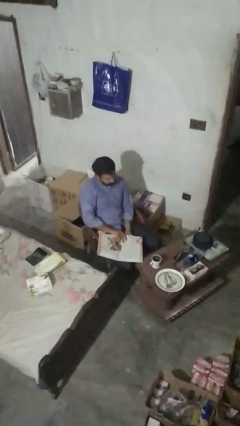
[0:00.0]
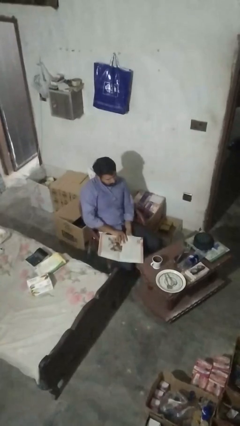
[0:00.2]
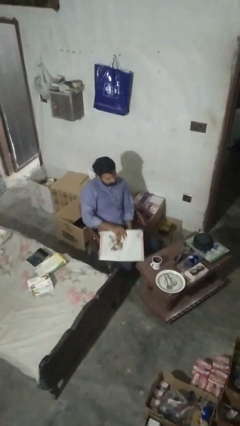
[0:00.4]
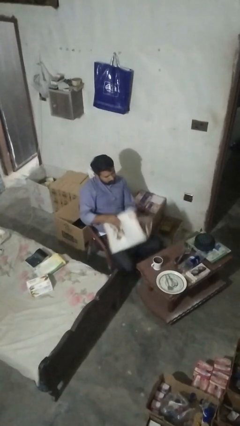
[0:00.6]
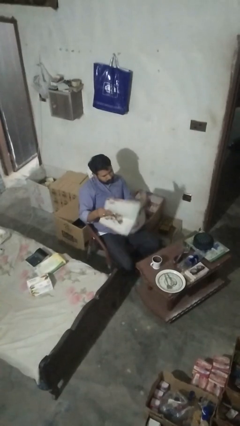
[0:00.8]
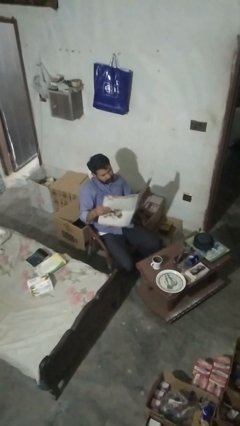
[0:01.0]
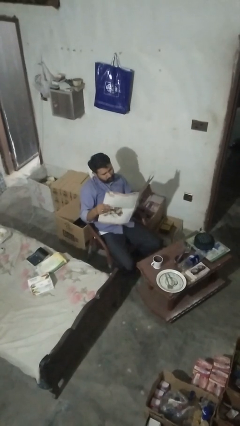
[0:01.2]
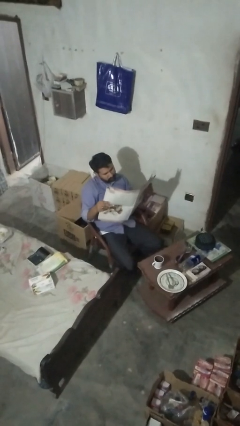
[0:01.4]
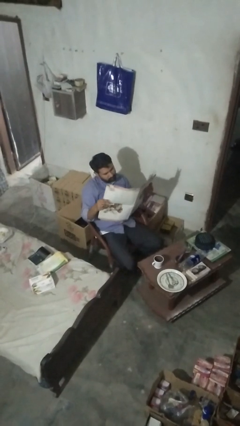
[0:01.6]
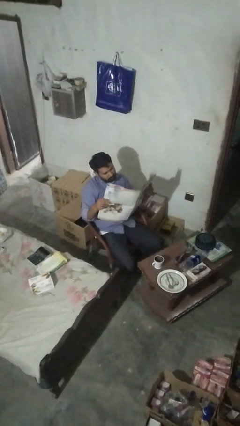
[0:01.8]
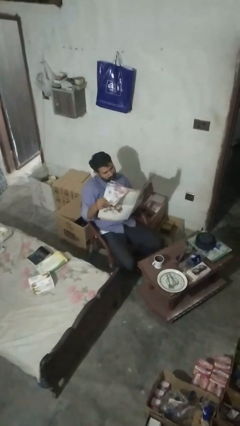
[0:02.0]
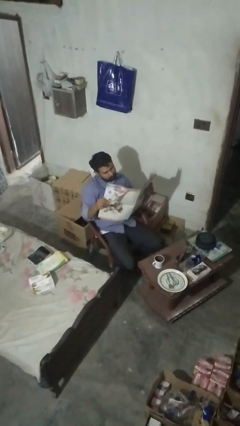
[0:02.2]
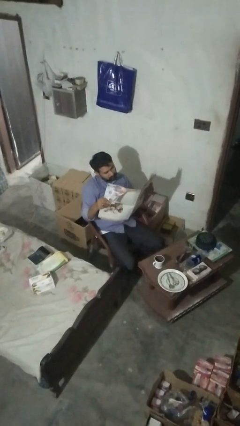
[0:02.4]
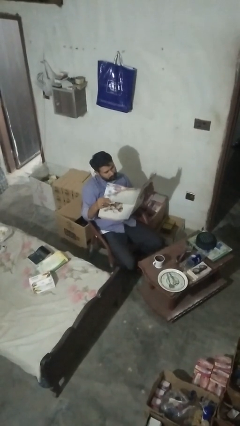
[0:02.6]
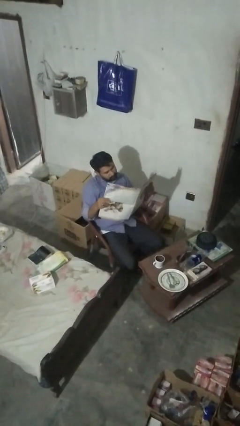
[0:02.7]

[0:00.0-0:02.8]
person reads newspaper

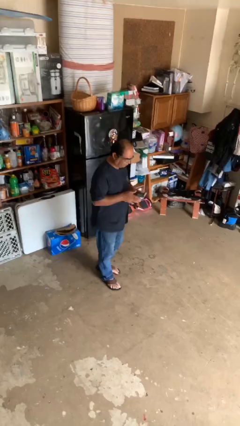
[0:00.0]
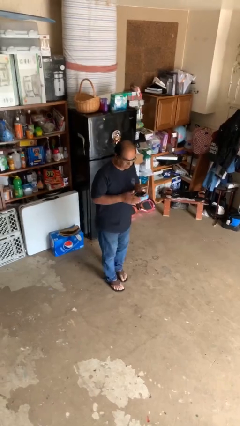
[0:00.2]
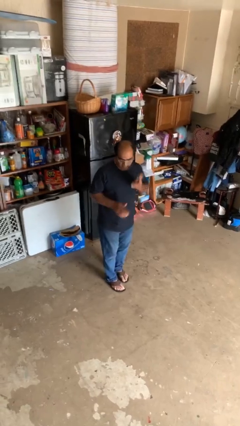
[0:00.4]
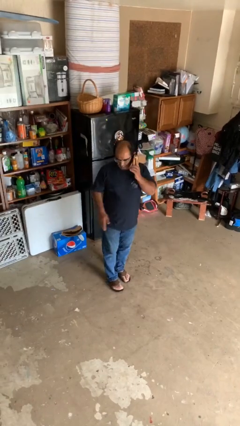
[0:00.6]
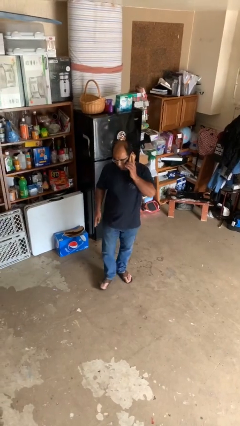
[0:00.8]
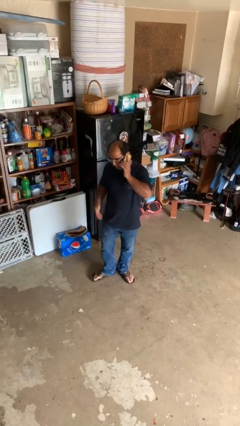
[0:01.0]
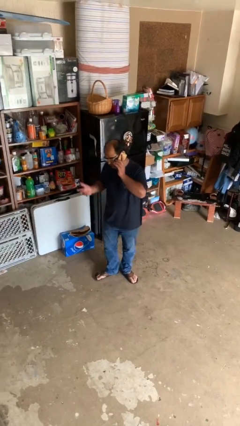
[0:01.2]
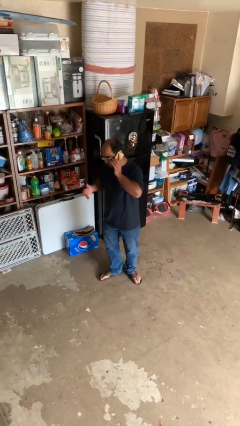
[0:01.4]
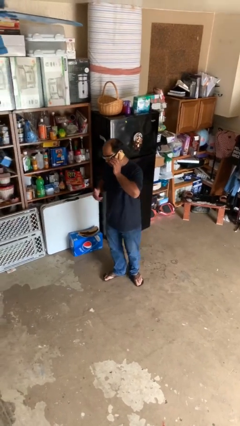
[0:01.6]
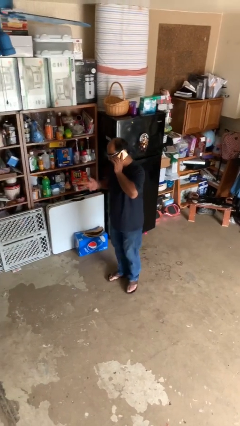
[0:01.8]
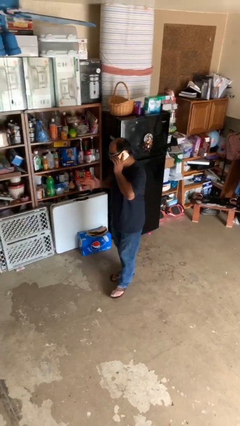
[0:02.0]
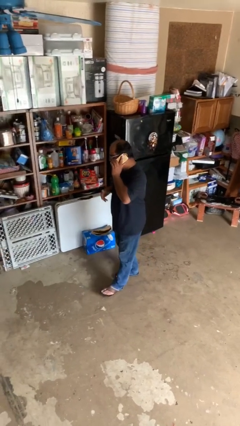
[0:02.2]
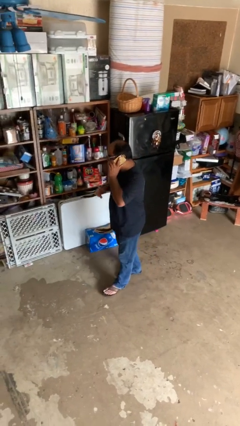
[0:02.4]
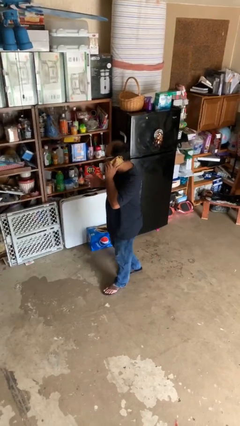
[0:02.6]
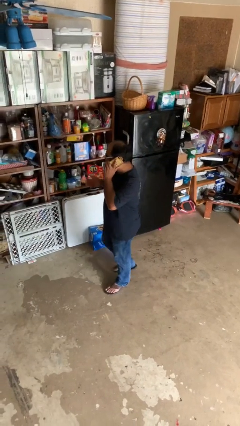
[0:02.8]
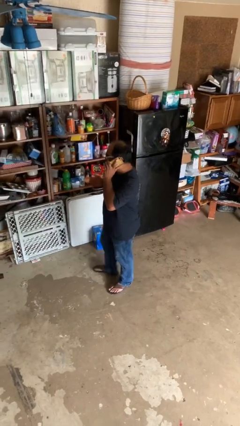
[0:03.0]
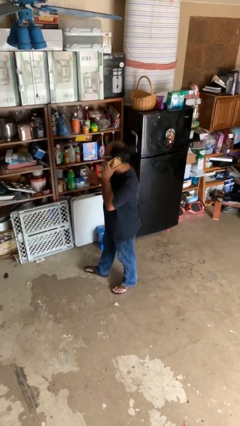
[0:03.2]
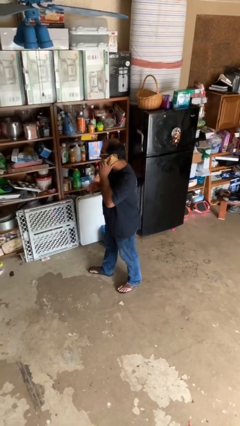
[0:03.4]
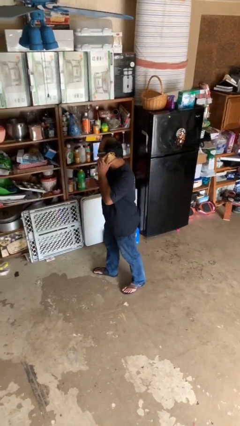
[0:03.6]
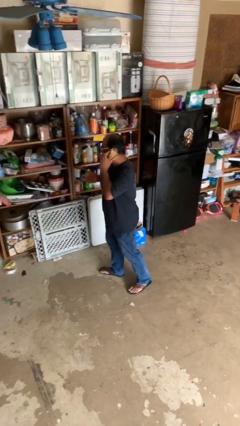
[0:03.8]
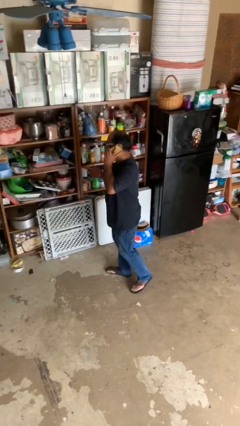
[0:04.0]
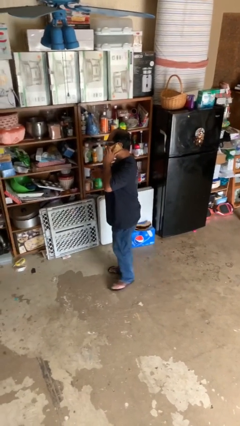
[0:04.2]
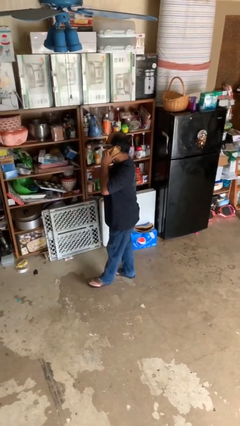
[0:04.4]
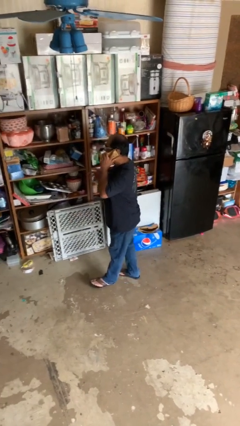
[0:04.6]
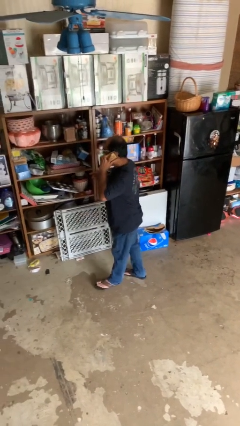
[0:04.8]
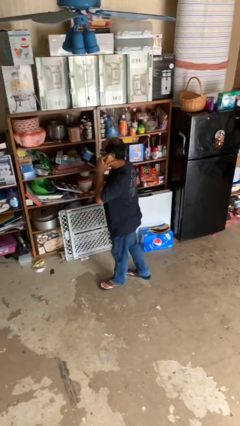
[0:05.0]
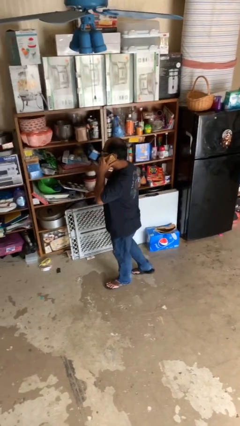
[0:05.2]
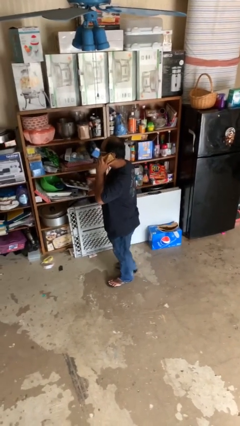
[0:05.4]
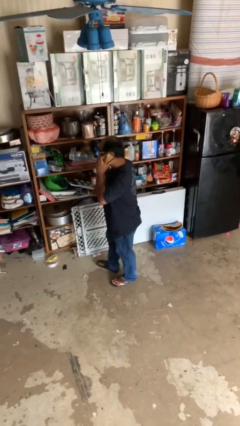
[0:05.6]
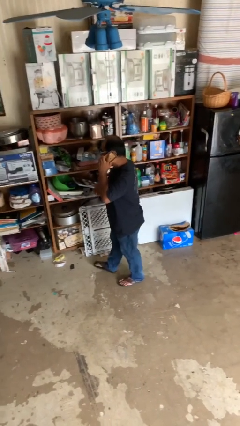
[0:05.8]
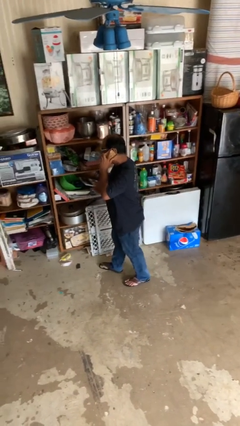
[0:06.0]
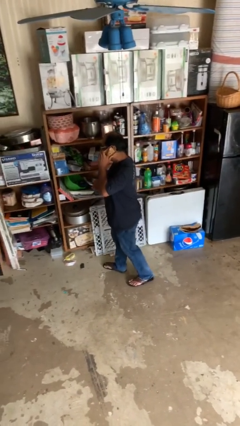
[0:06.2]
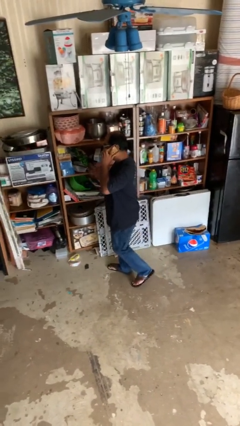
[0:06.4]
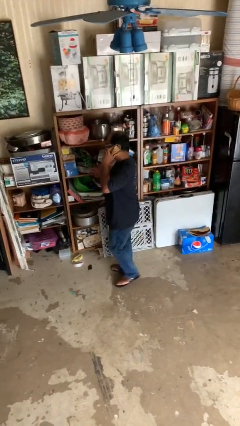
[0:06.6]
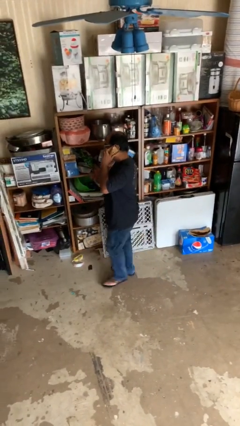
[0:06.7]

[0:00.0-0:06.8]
person talks on phone

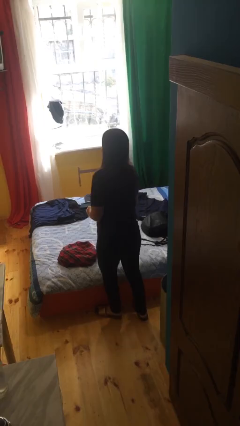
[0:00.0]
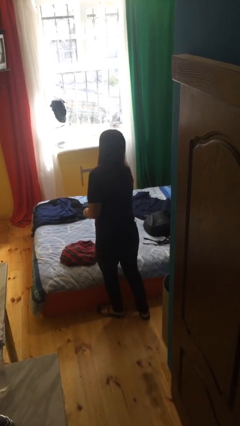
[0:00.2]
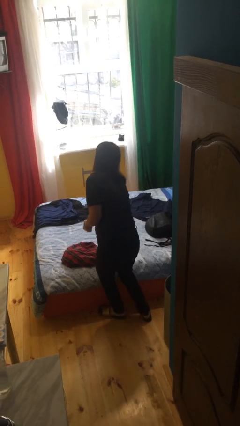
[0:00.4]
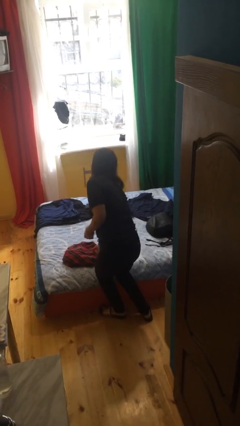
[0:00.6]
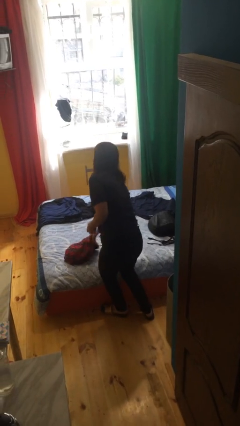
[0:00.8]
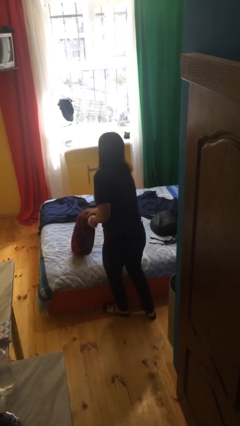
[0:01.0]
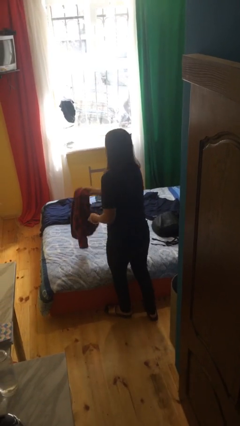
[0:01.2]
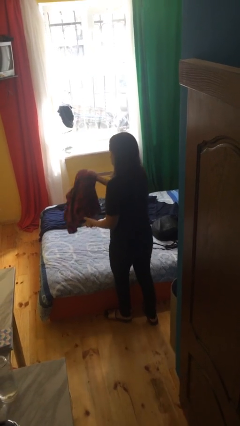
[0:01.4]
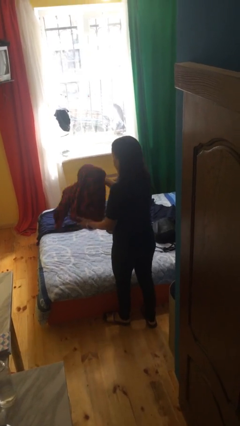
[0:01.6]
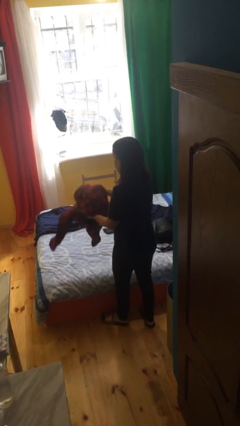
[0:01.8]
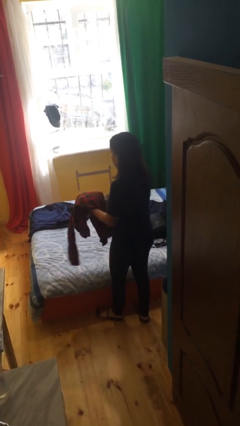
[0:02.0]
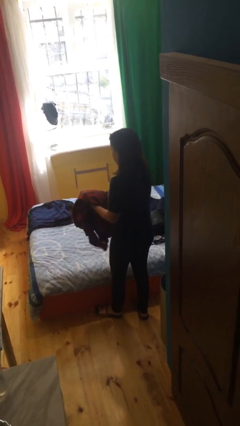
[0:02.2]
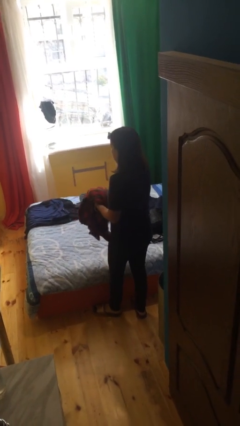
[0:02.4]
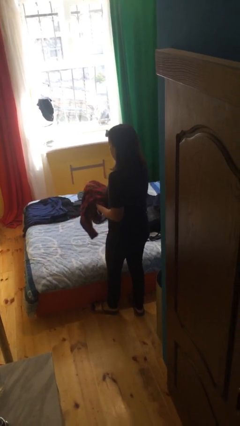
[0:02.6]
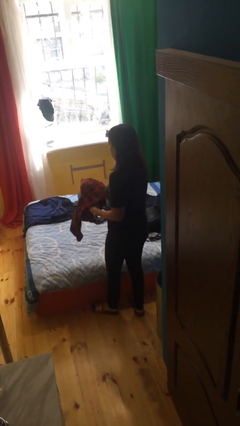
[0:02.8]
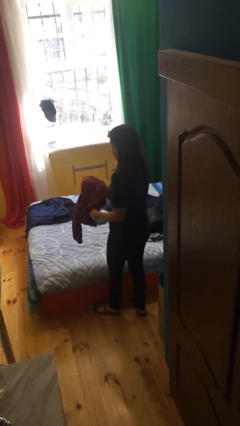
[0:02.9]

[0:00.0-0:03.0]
person picks up object from bed

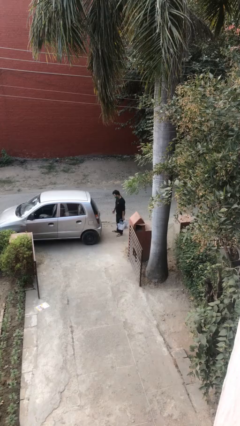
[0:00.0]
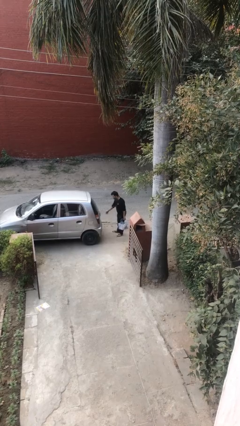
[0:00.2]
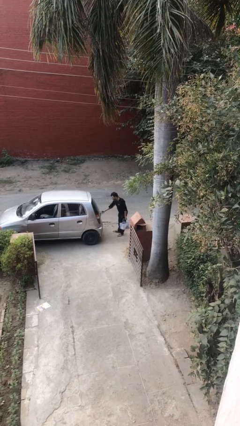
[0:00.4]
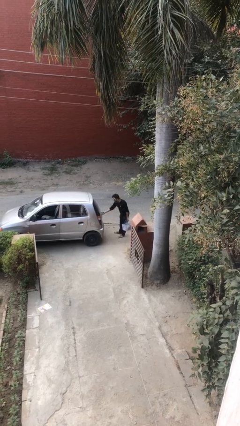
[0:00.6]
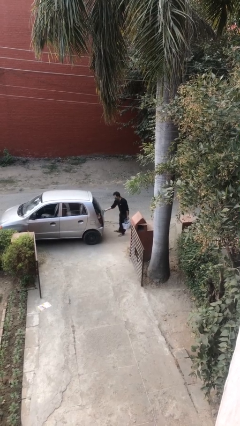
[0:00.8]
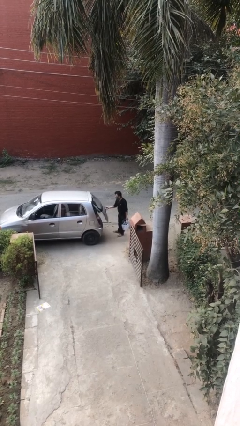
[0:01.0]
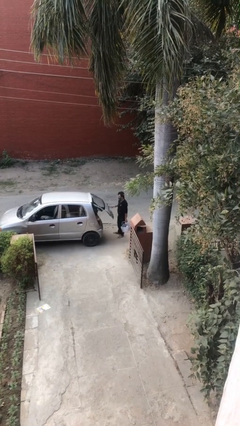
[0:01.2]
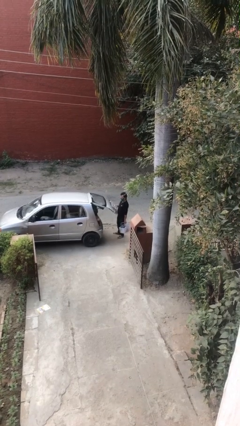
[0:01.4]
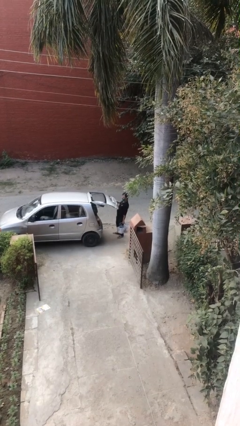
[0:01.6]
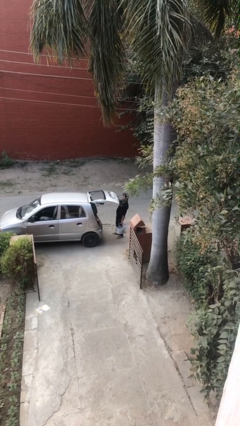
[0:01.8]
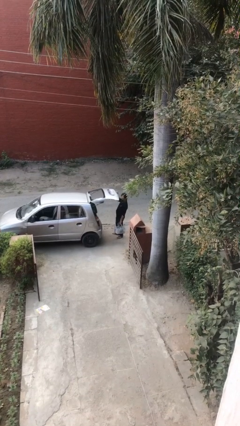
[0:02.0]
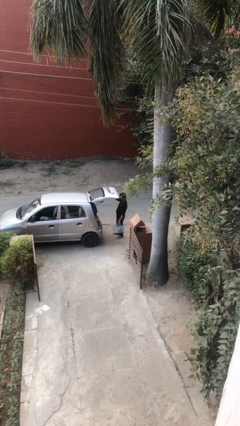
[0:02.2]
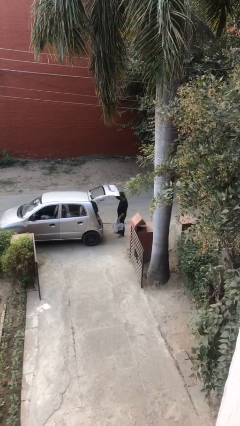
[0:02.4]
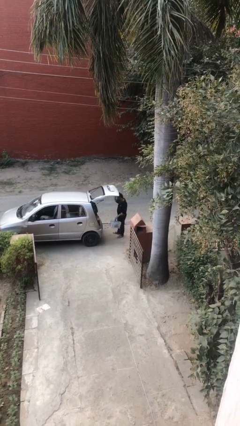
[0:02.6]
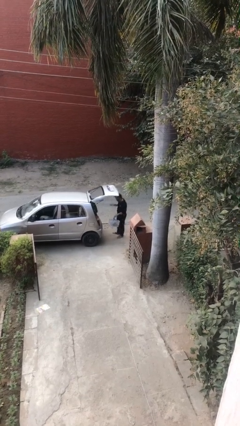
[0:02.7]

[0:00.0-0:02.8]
person opens car trunk

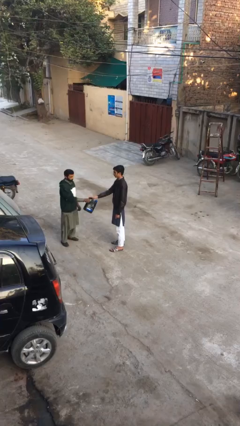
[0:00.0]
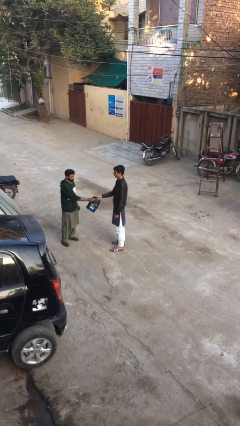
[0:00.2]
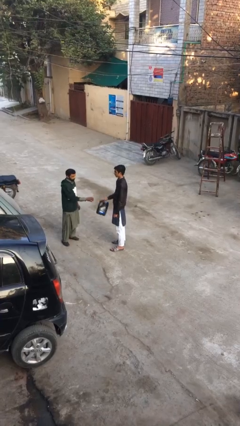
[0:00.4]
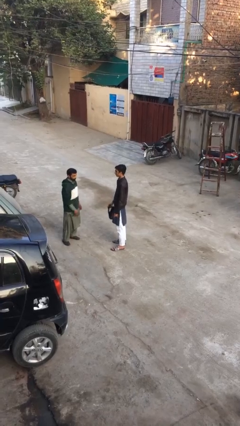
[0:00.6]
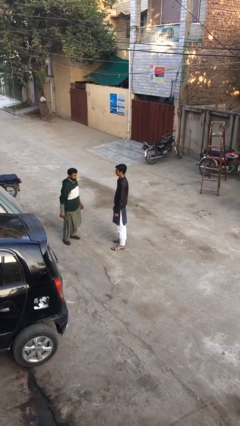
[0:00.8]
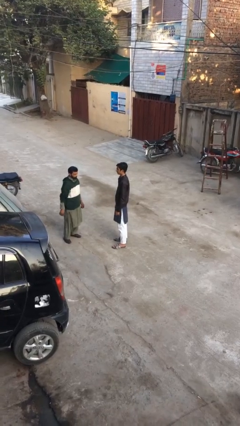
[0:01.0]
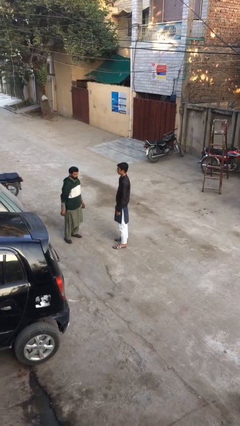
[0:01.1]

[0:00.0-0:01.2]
person transfers object to person

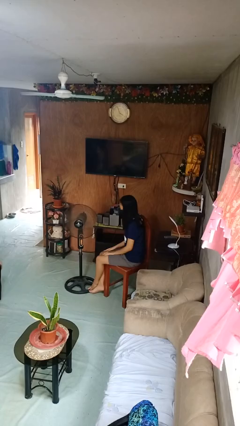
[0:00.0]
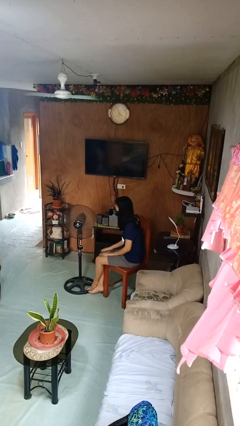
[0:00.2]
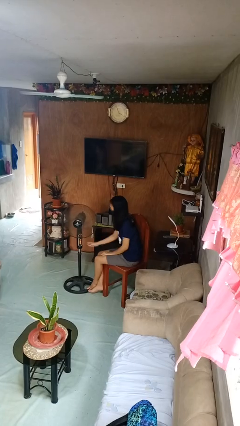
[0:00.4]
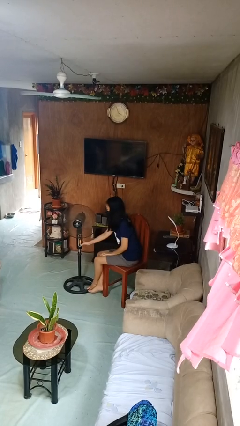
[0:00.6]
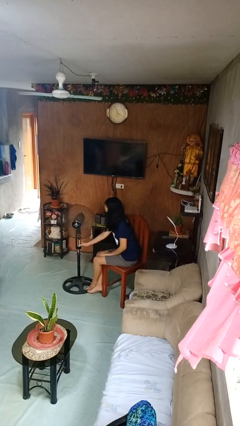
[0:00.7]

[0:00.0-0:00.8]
person turns off fan
